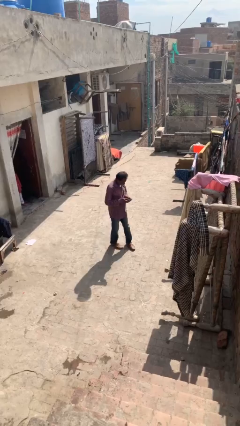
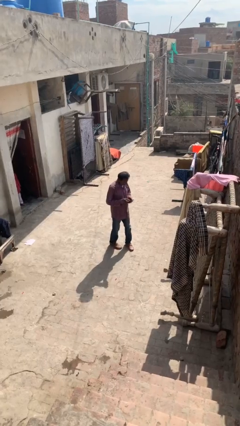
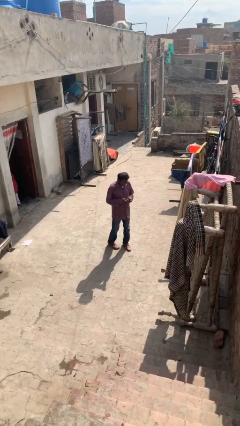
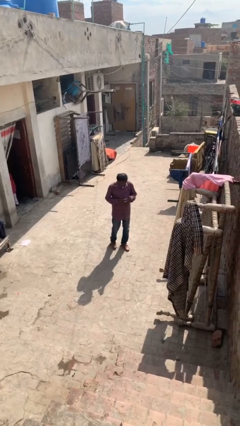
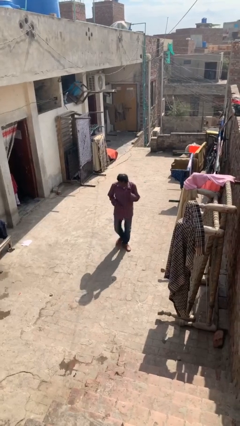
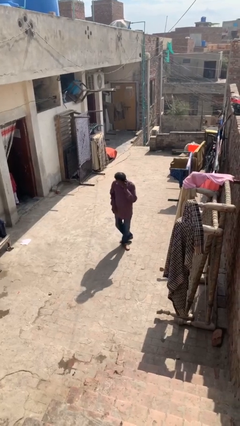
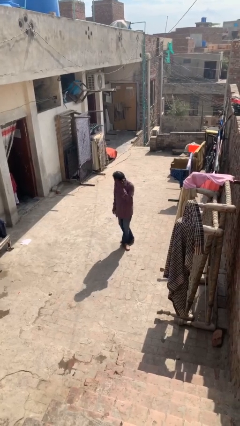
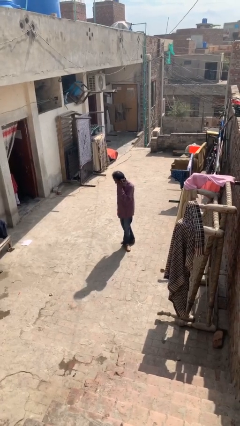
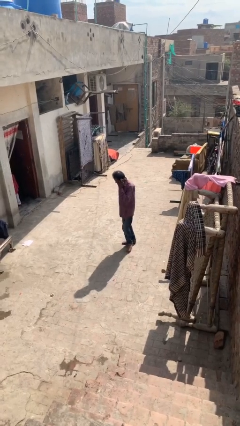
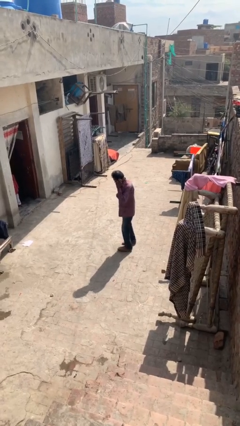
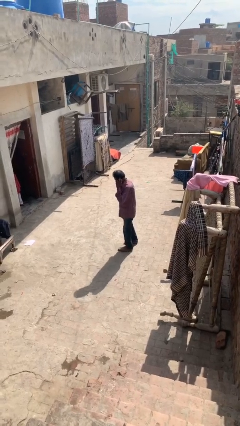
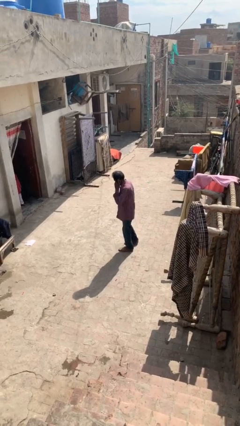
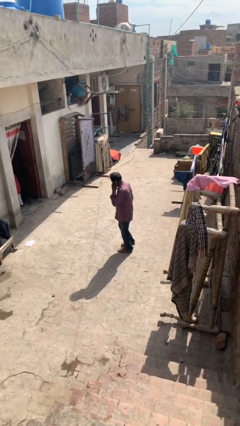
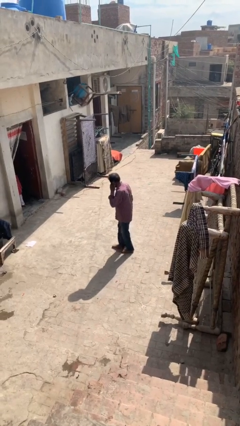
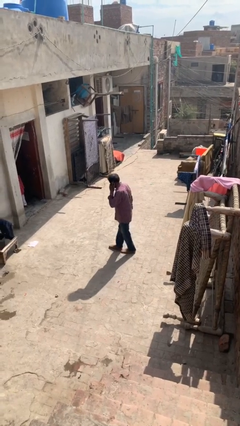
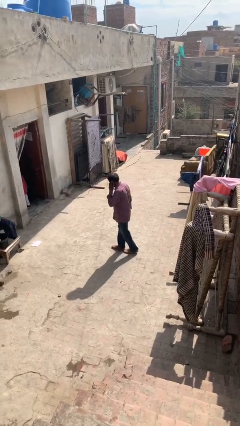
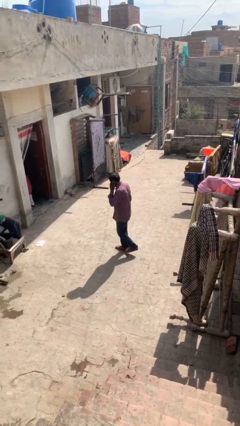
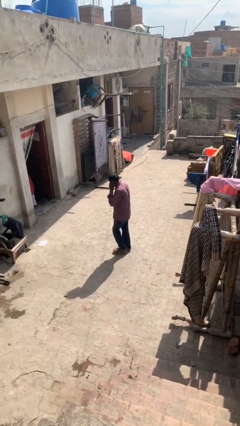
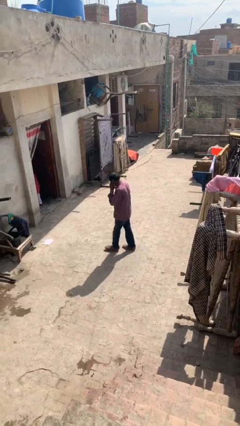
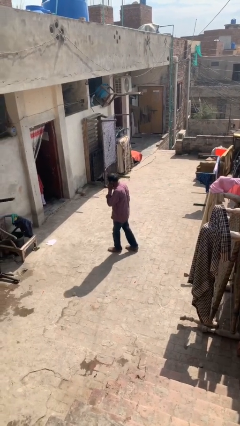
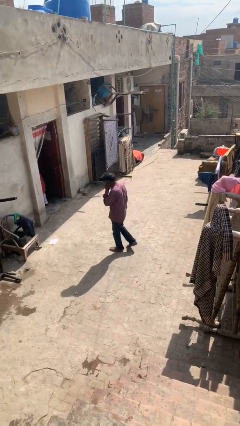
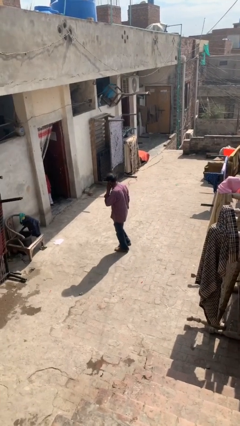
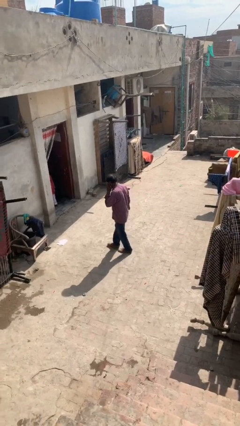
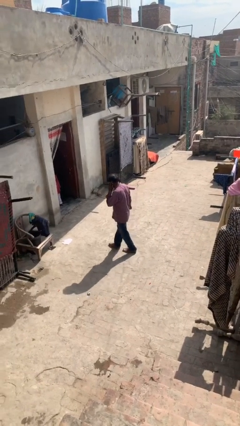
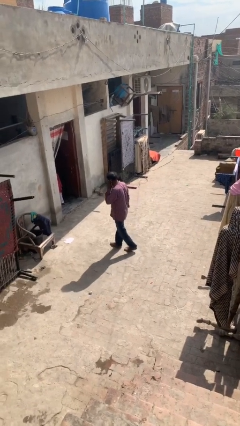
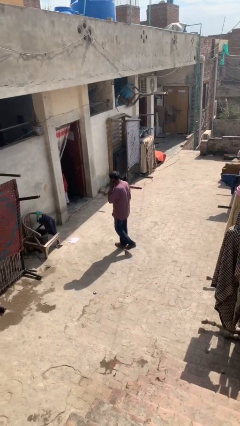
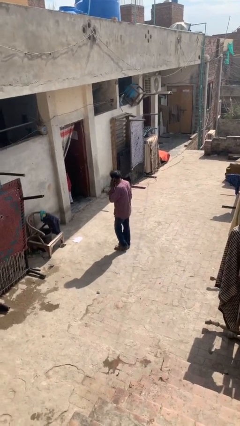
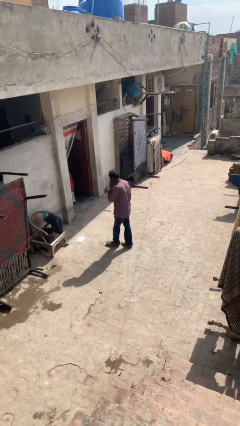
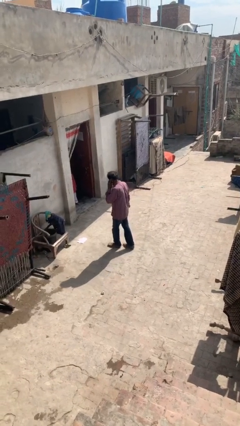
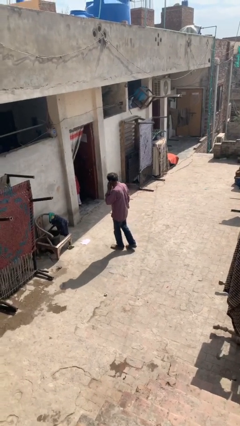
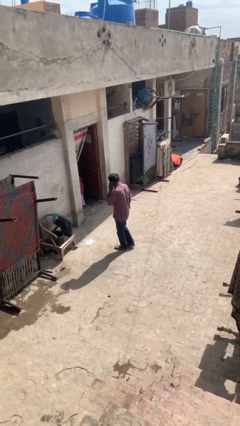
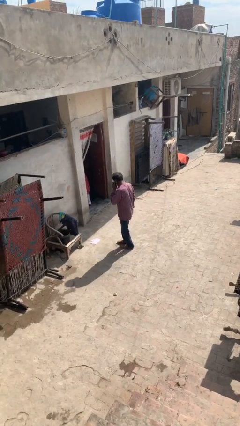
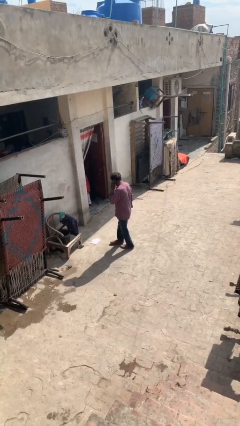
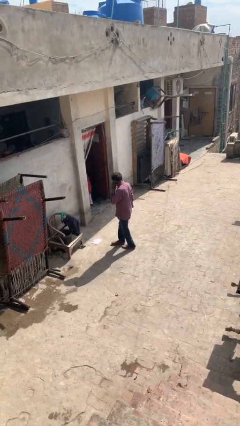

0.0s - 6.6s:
person talks on phone

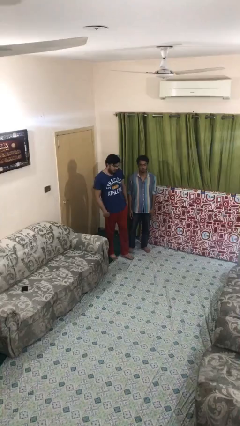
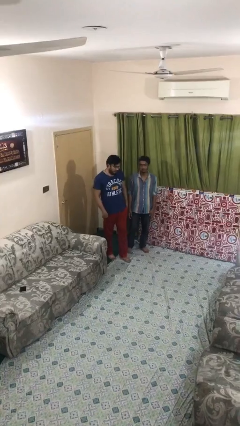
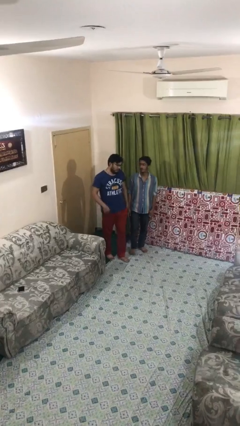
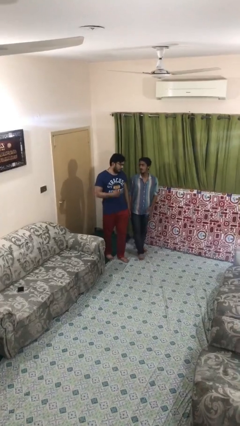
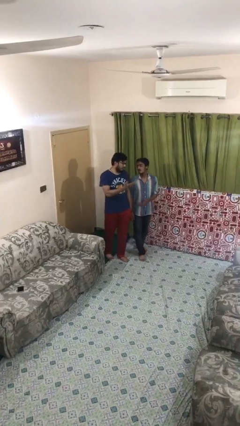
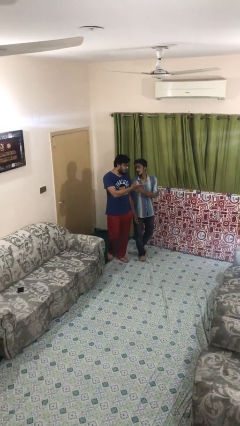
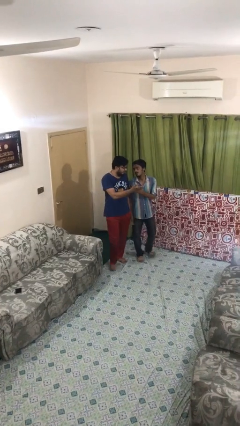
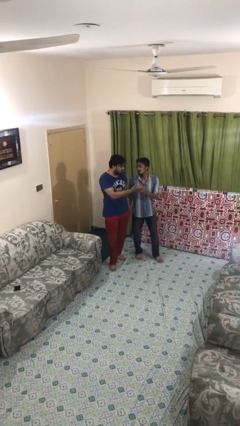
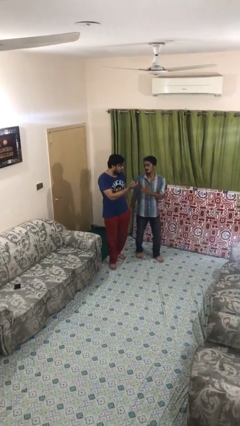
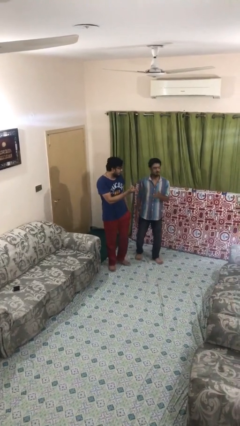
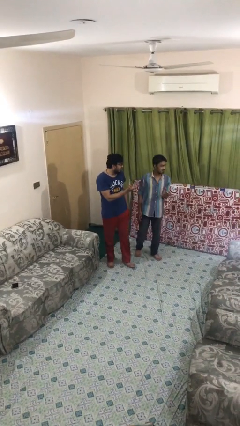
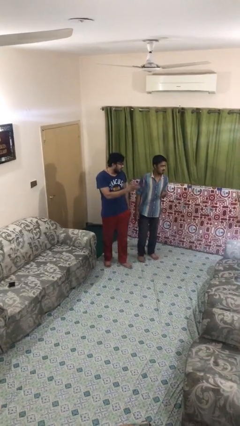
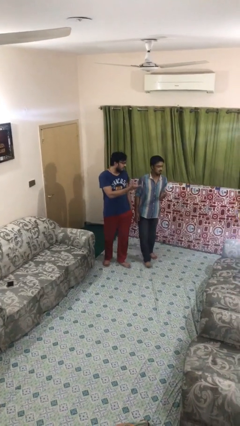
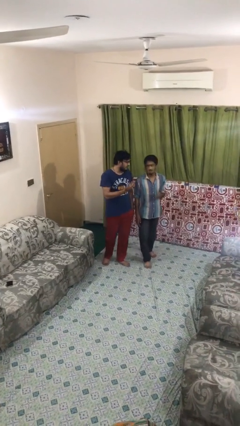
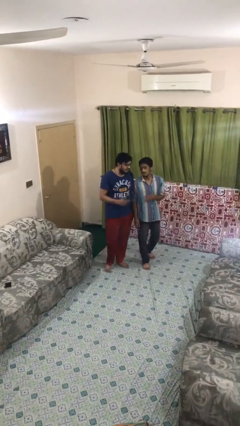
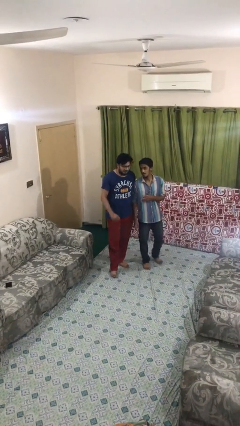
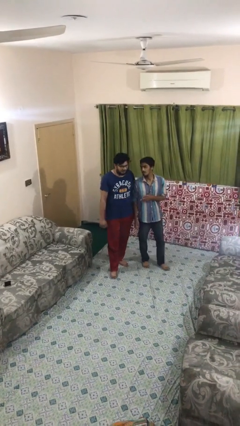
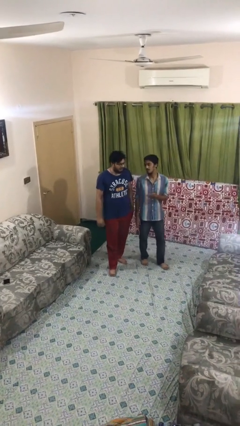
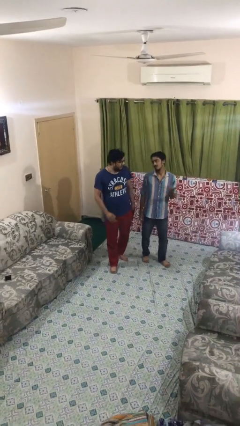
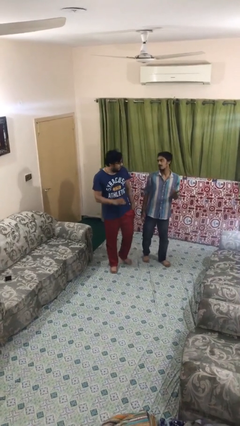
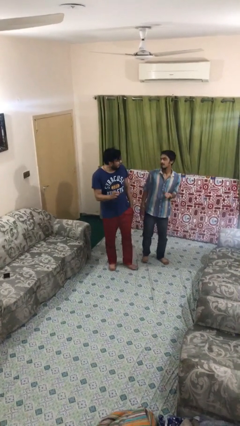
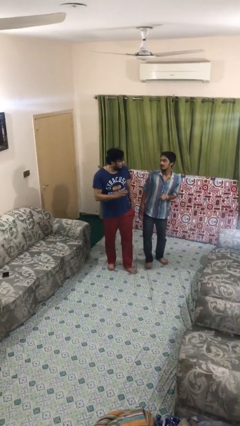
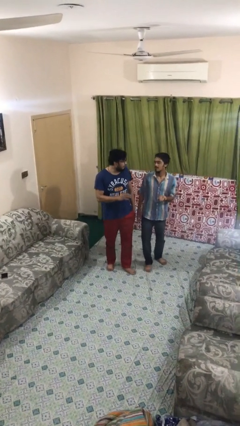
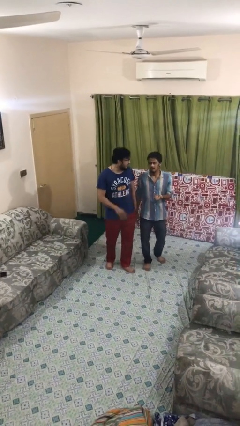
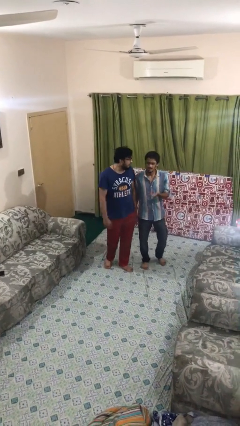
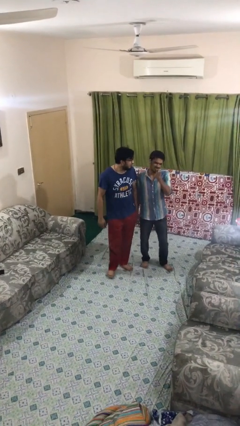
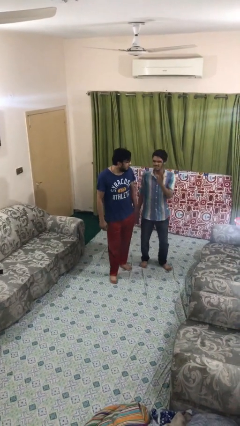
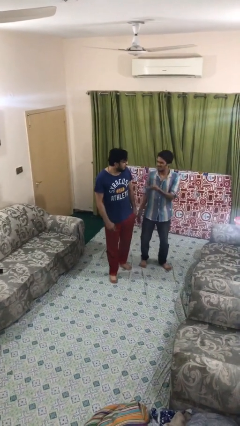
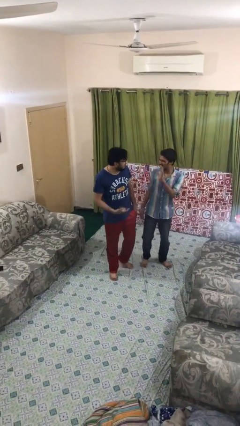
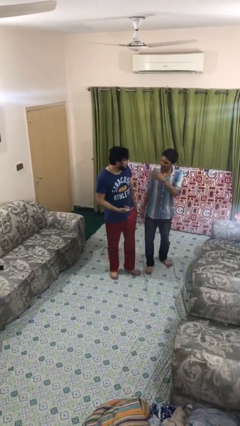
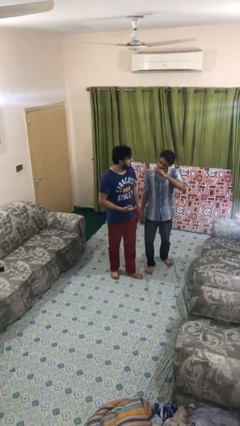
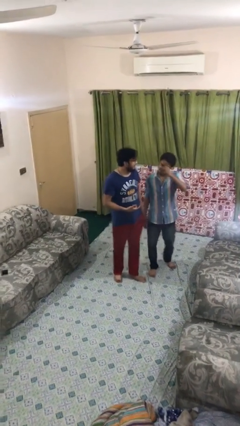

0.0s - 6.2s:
person talks to person

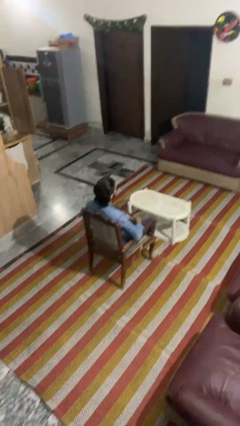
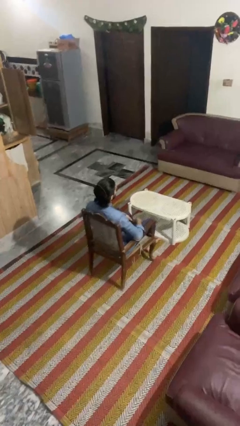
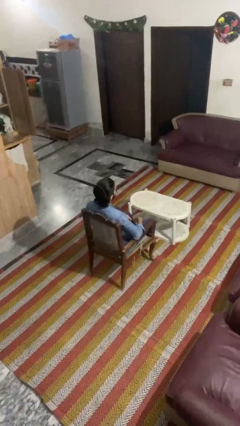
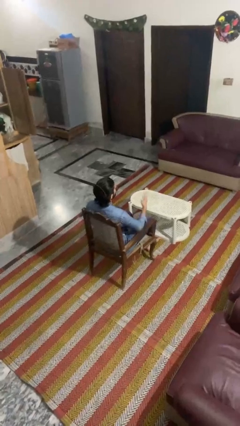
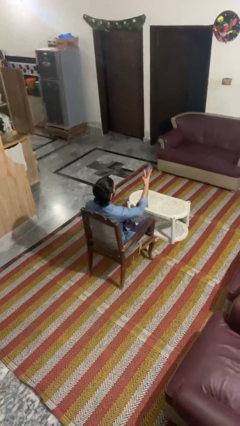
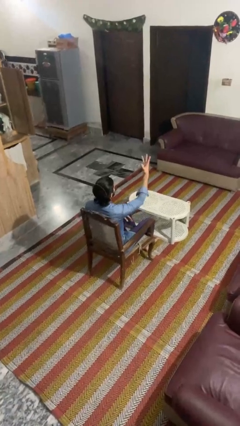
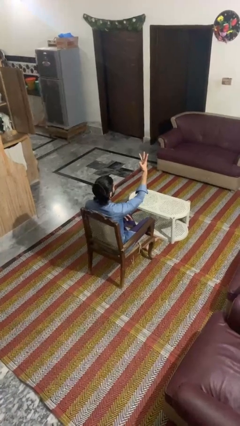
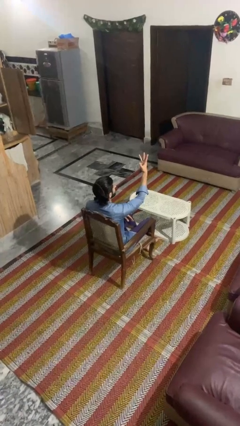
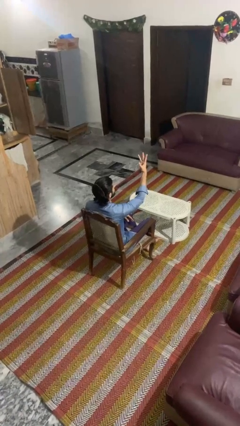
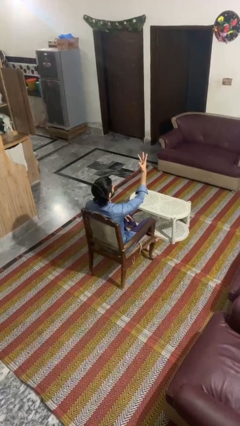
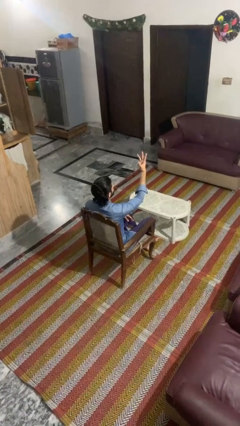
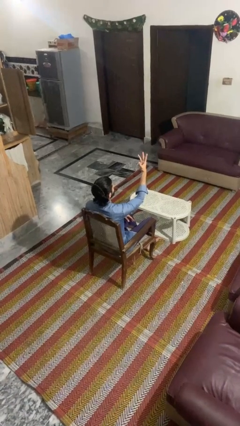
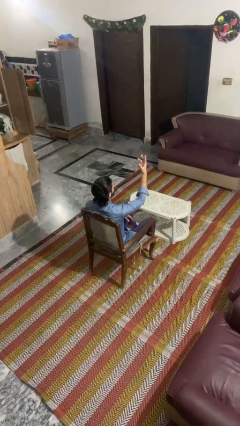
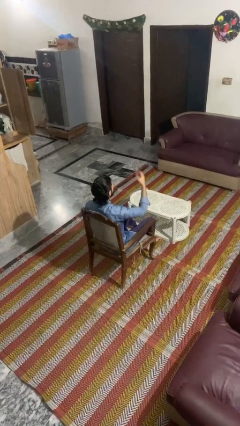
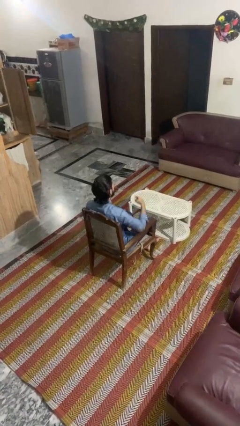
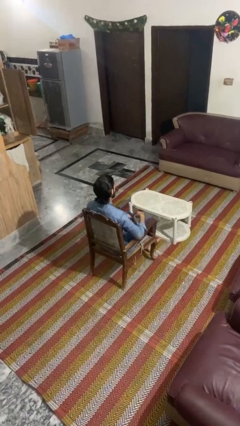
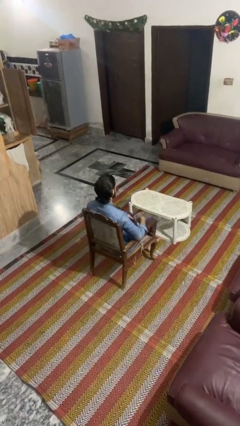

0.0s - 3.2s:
person gestures number three

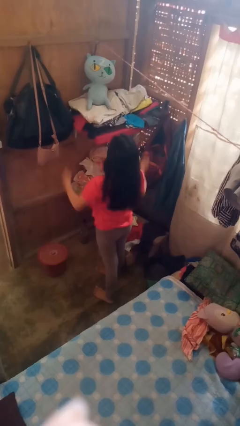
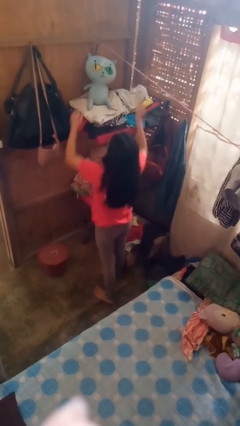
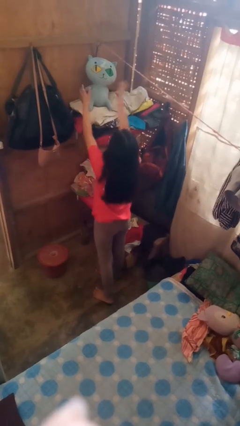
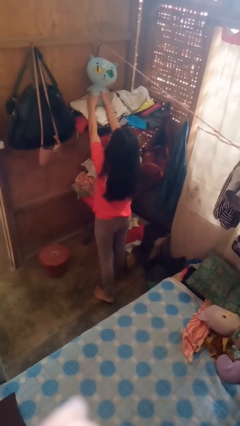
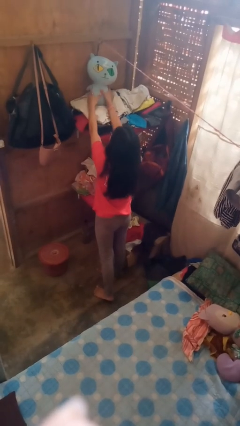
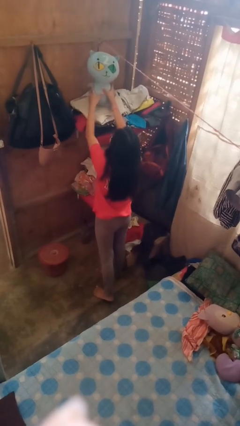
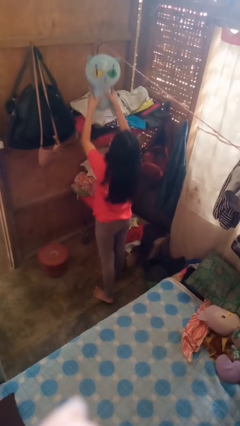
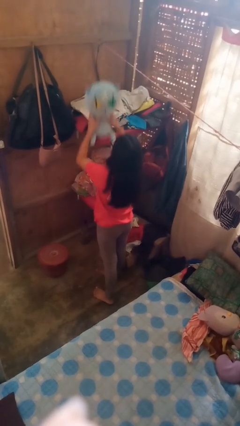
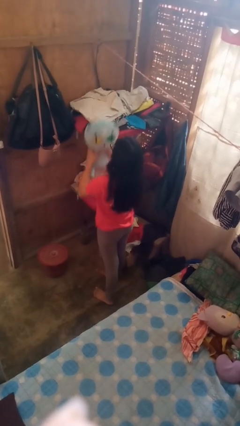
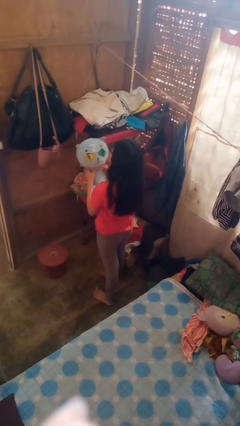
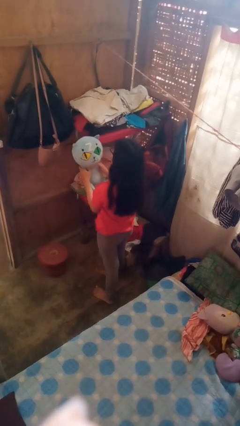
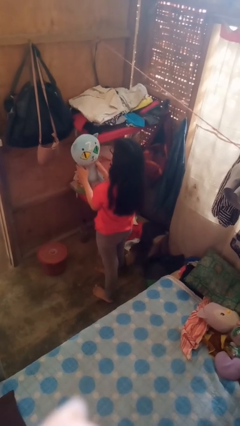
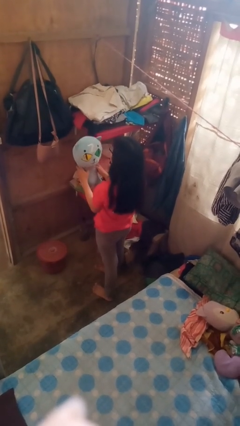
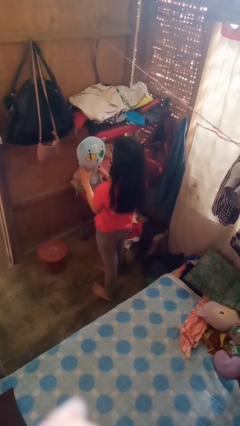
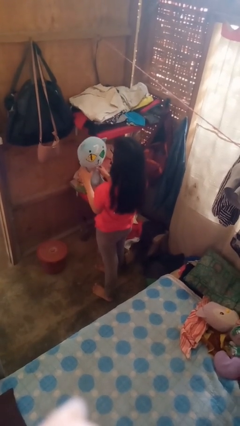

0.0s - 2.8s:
person picks up object from shelf
